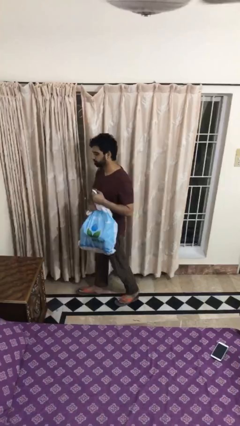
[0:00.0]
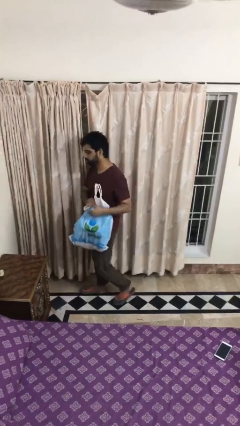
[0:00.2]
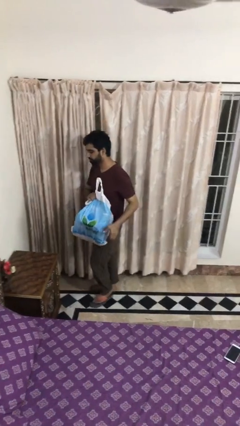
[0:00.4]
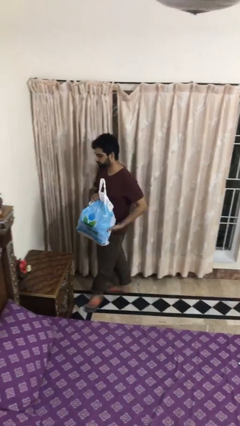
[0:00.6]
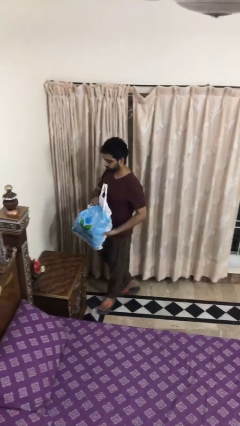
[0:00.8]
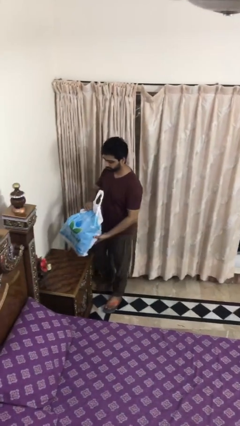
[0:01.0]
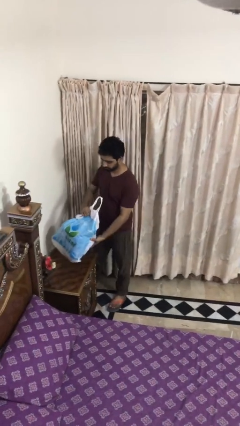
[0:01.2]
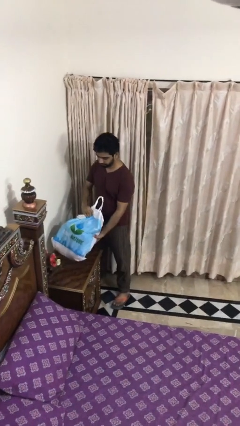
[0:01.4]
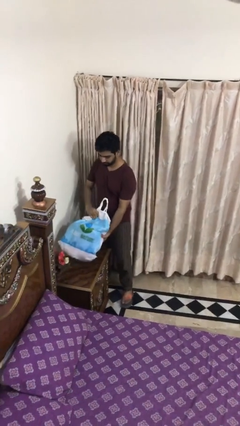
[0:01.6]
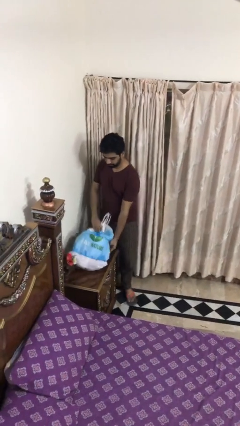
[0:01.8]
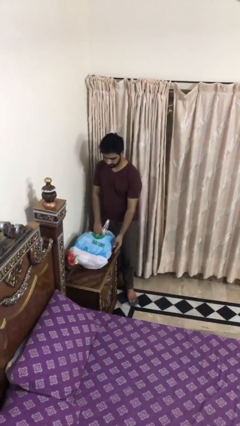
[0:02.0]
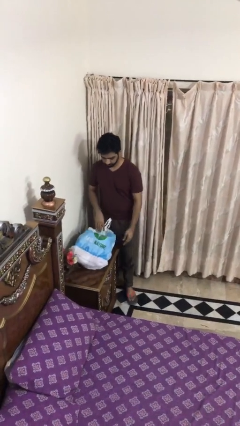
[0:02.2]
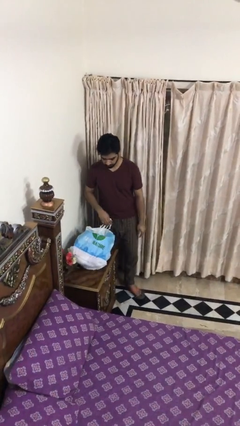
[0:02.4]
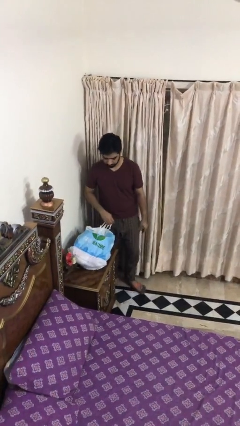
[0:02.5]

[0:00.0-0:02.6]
person puts down object on table

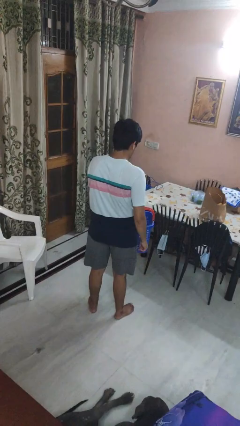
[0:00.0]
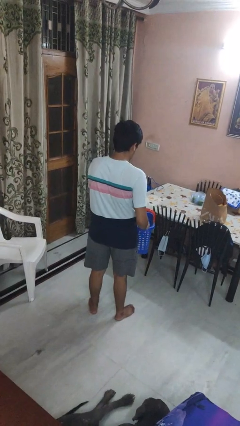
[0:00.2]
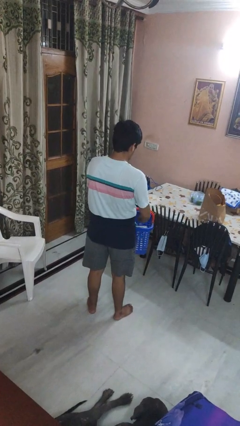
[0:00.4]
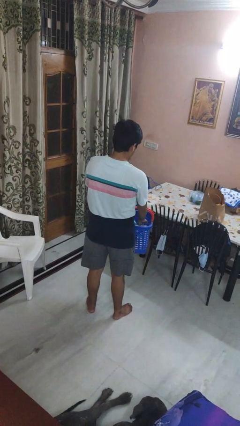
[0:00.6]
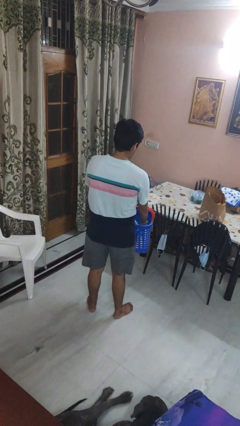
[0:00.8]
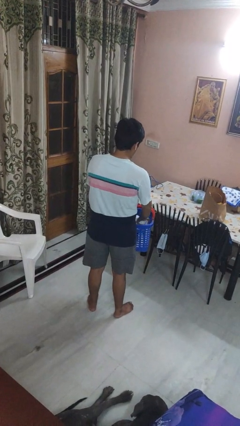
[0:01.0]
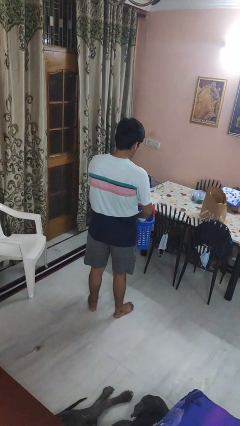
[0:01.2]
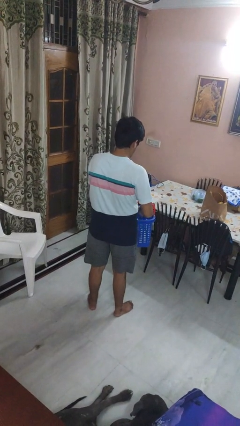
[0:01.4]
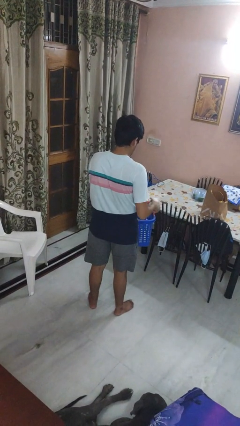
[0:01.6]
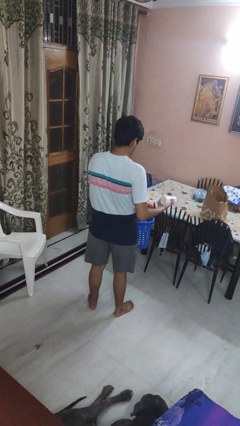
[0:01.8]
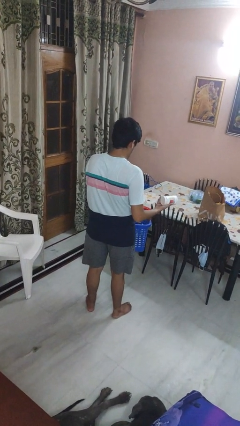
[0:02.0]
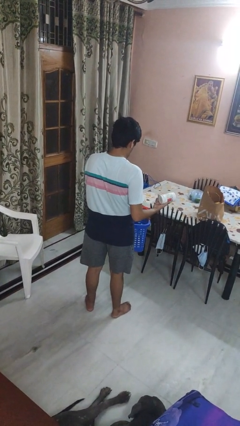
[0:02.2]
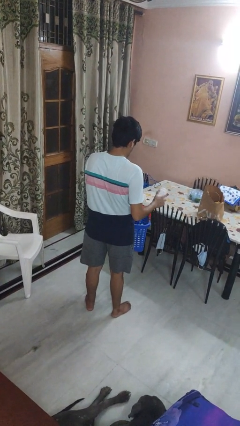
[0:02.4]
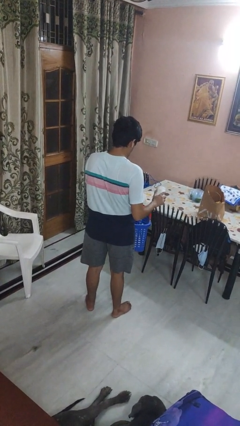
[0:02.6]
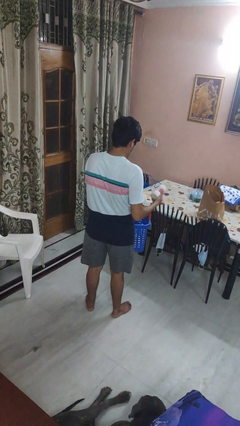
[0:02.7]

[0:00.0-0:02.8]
person takes object from basket

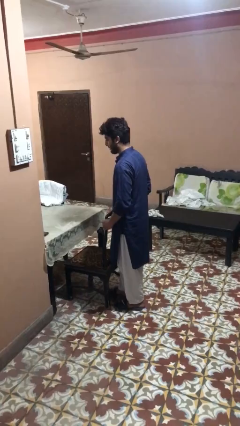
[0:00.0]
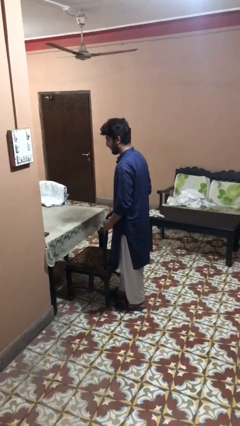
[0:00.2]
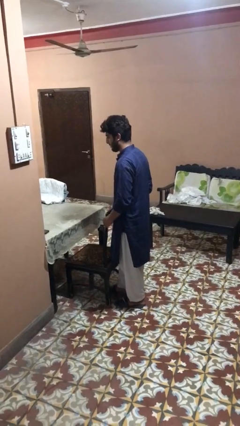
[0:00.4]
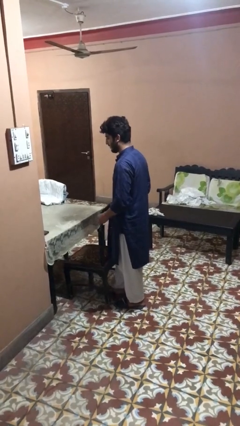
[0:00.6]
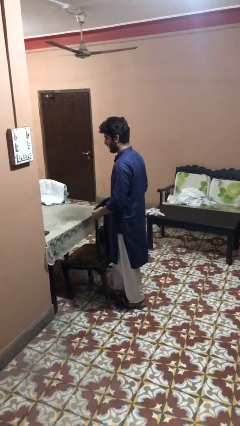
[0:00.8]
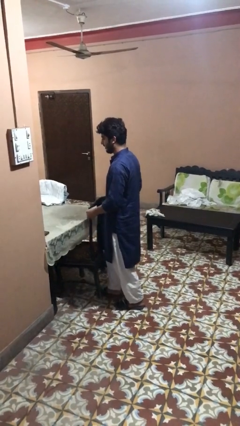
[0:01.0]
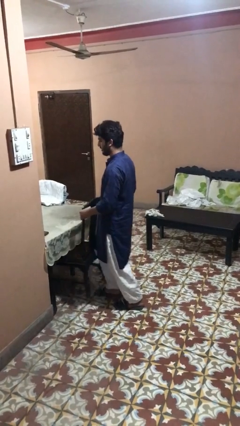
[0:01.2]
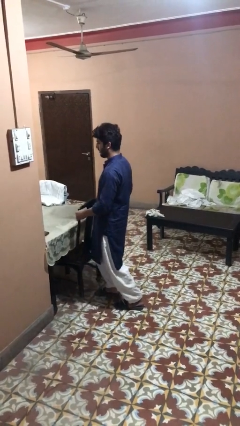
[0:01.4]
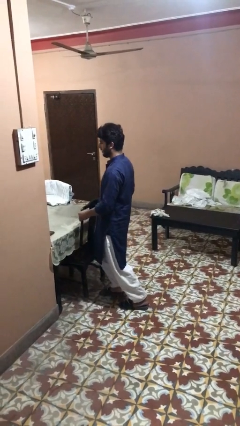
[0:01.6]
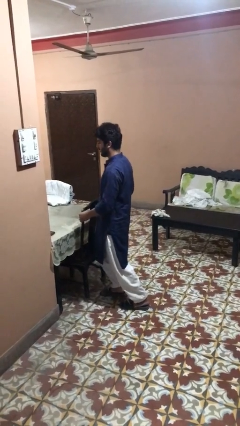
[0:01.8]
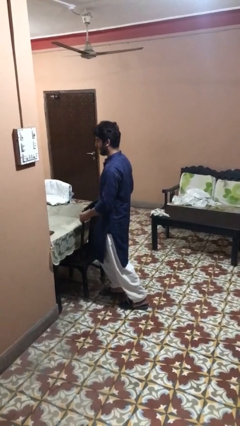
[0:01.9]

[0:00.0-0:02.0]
person pushes in chair

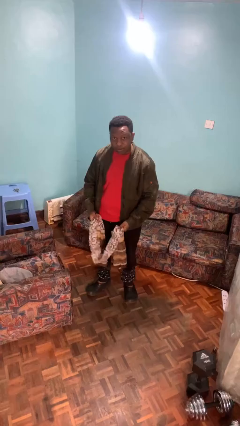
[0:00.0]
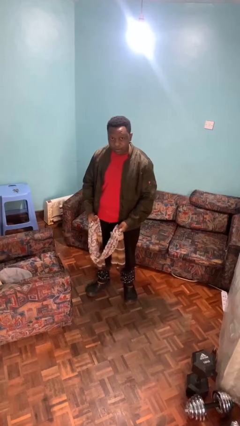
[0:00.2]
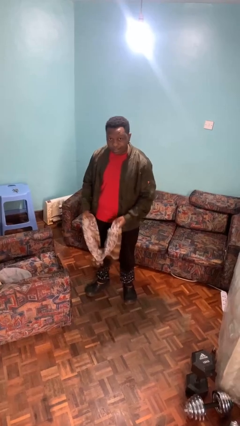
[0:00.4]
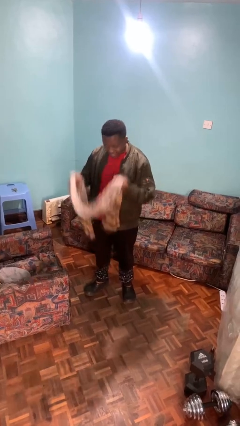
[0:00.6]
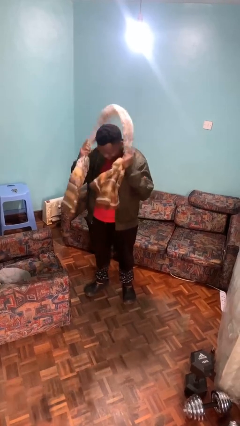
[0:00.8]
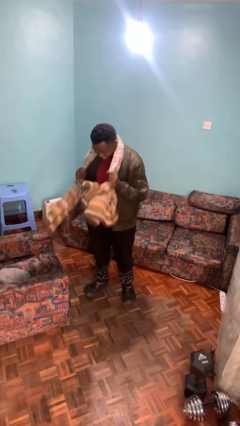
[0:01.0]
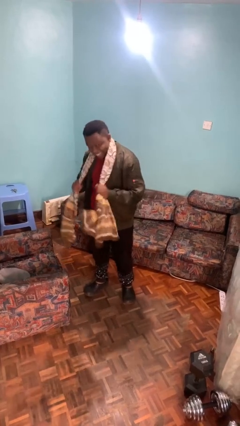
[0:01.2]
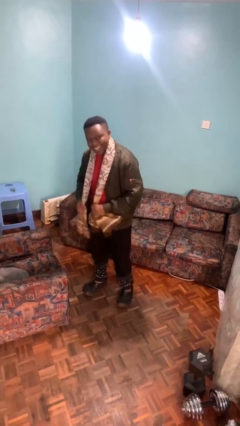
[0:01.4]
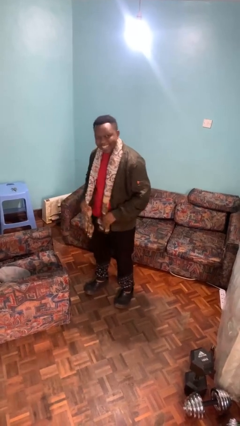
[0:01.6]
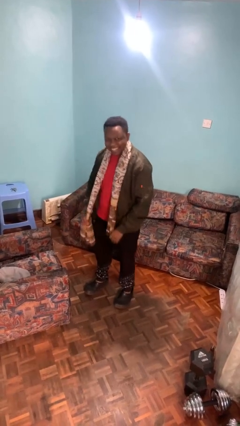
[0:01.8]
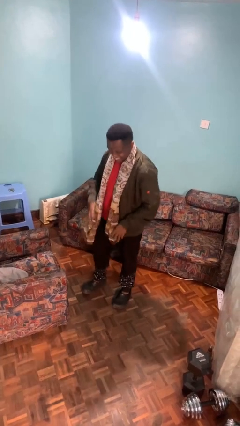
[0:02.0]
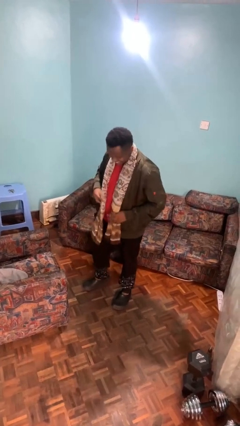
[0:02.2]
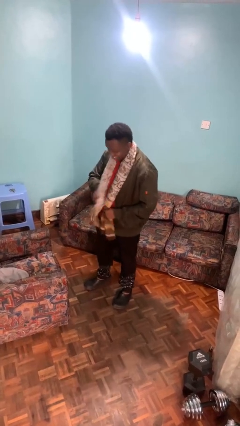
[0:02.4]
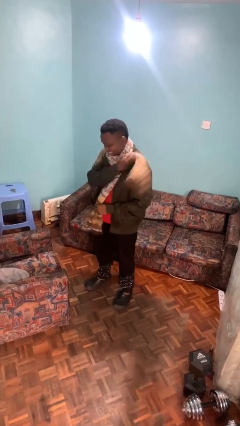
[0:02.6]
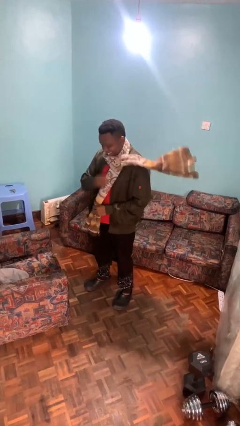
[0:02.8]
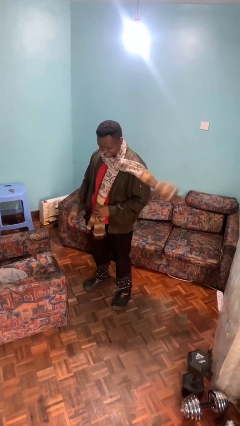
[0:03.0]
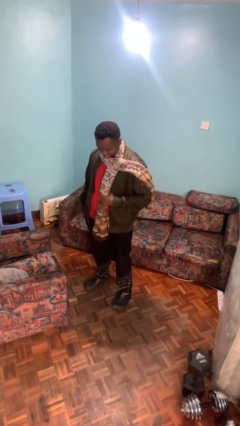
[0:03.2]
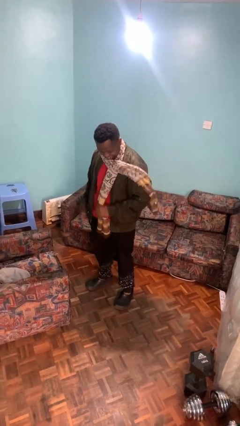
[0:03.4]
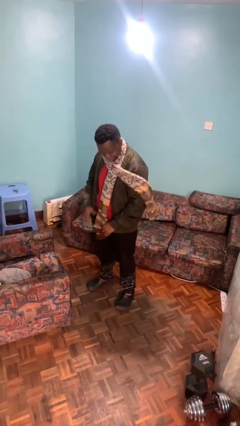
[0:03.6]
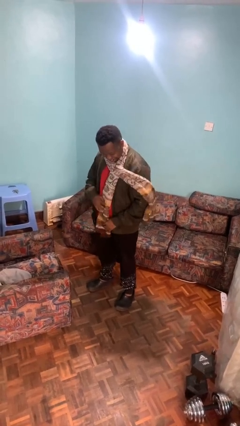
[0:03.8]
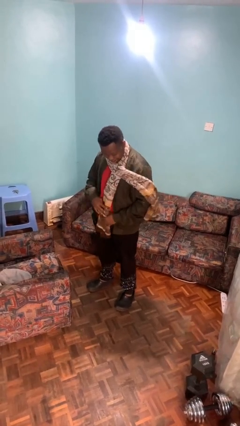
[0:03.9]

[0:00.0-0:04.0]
person puts on scarf

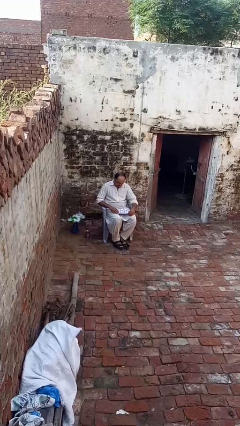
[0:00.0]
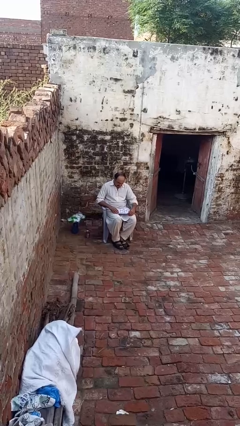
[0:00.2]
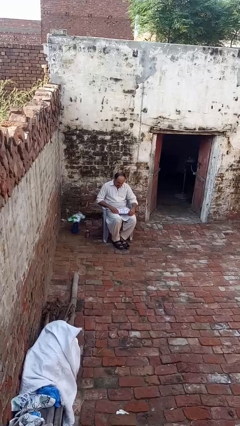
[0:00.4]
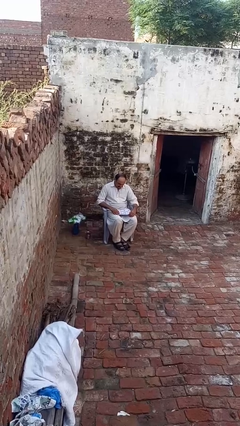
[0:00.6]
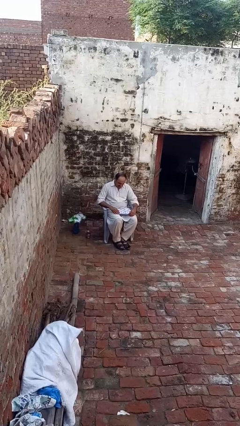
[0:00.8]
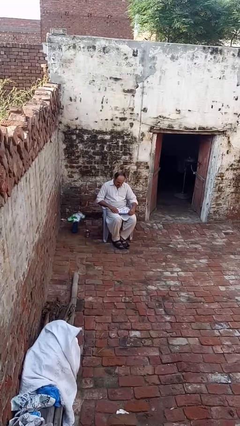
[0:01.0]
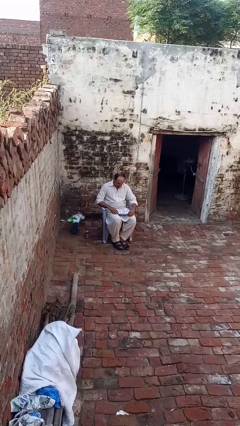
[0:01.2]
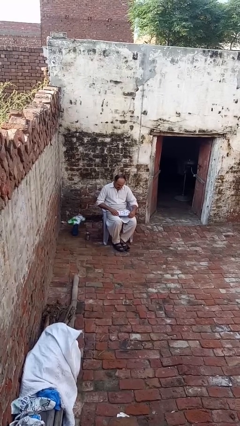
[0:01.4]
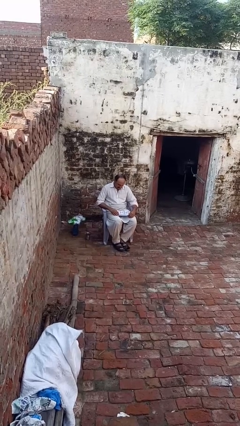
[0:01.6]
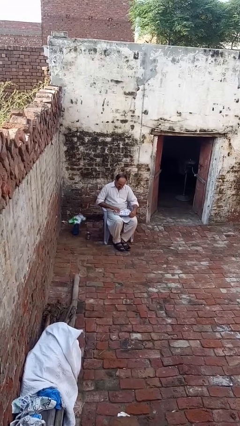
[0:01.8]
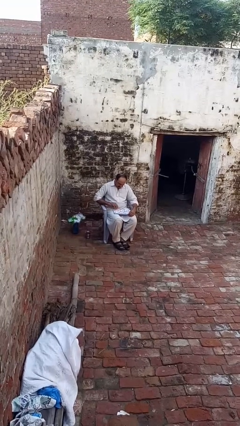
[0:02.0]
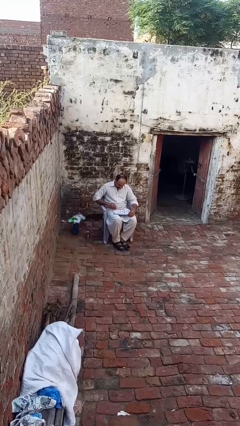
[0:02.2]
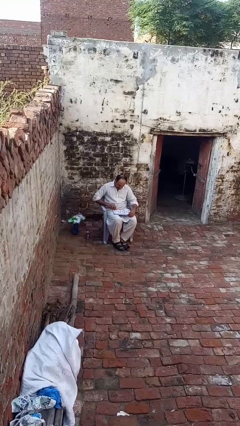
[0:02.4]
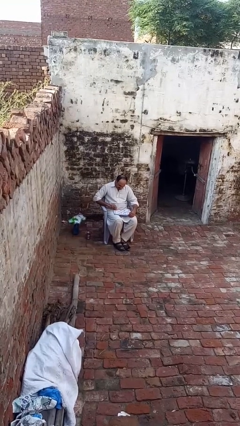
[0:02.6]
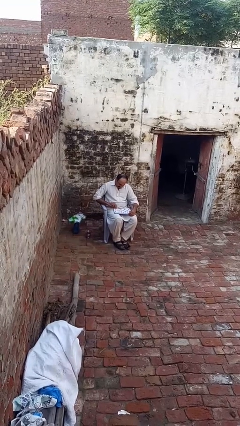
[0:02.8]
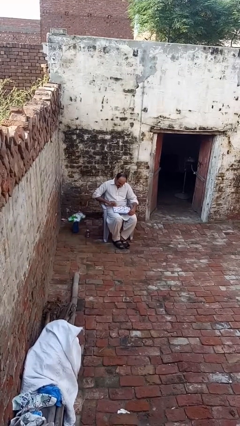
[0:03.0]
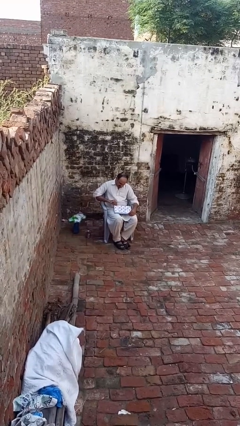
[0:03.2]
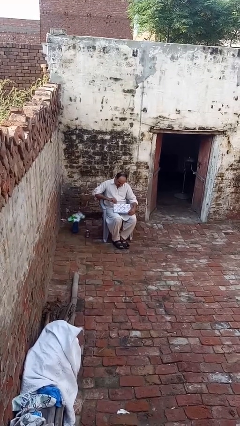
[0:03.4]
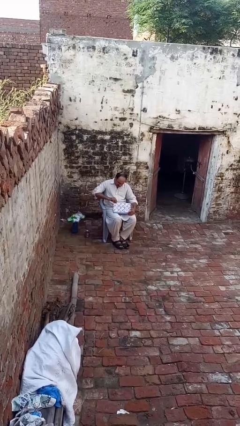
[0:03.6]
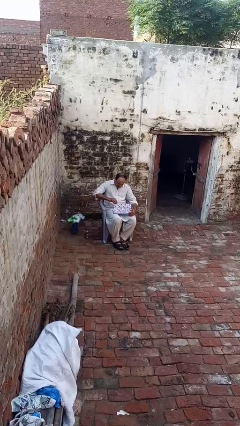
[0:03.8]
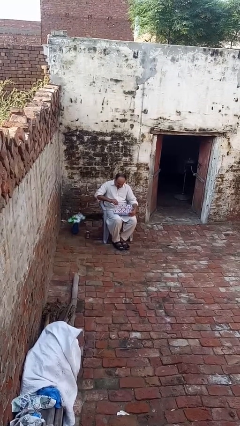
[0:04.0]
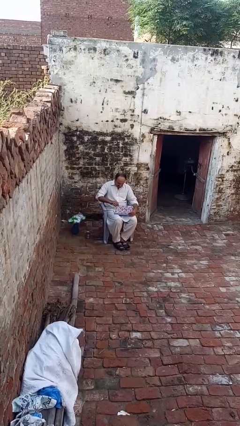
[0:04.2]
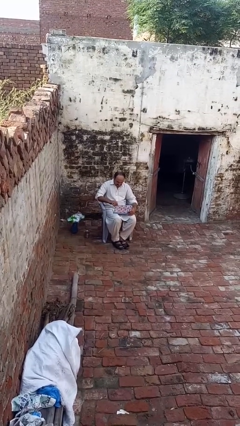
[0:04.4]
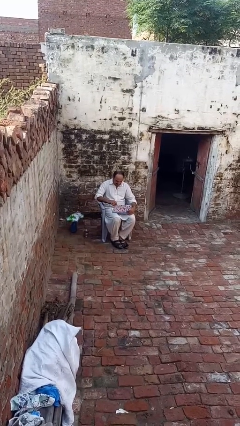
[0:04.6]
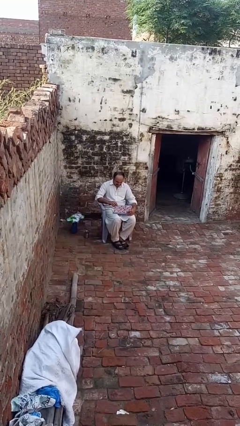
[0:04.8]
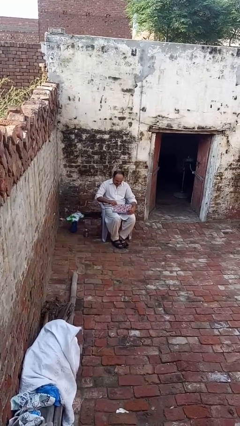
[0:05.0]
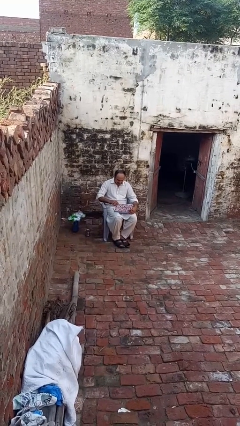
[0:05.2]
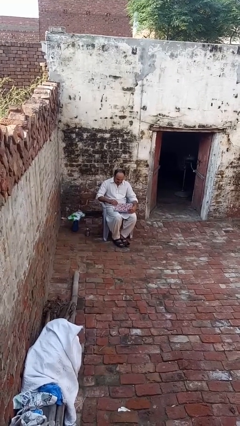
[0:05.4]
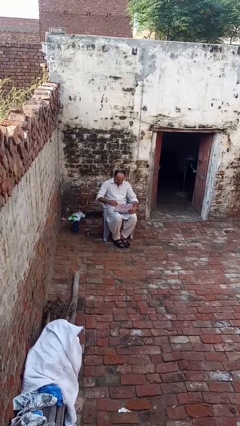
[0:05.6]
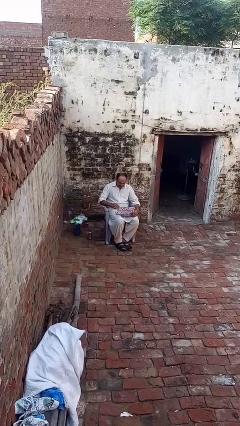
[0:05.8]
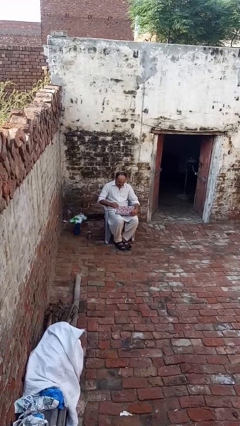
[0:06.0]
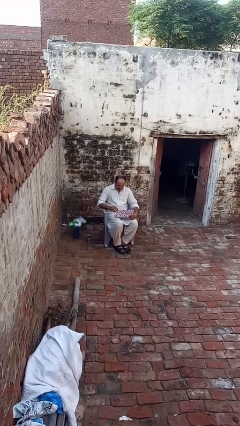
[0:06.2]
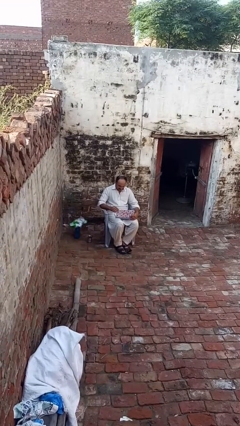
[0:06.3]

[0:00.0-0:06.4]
person opens laptop
